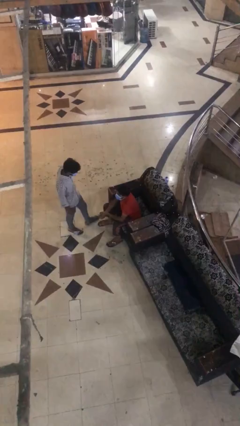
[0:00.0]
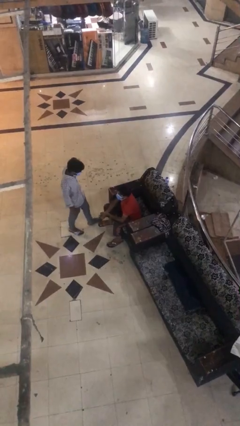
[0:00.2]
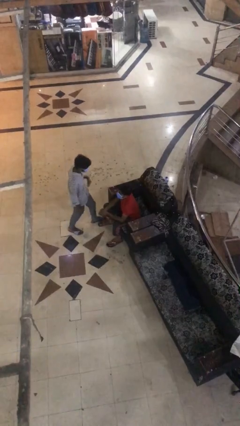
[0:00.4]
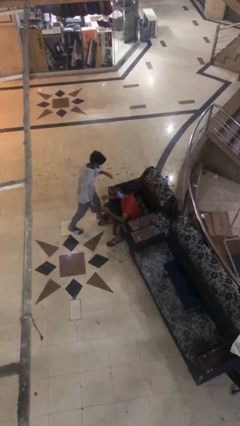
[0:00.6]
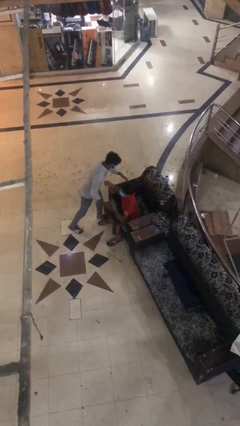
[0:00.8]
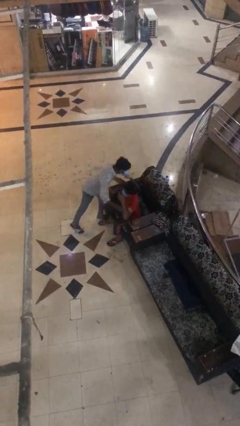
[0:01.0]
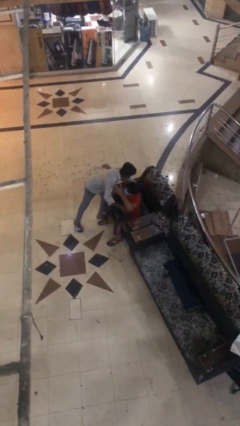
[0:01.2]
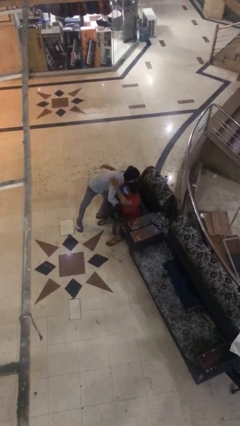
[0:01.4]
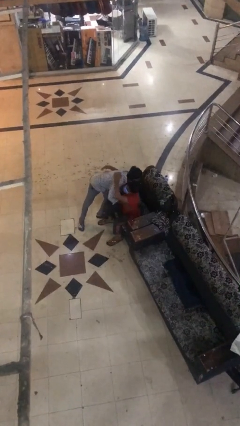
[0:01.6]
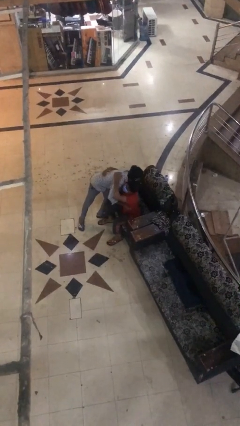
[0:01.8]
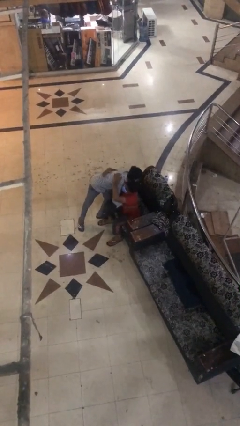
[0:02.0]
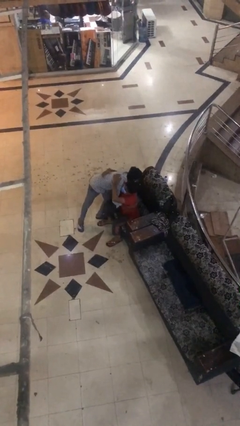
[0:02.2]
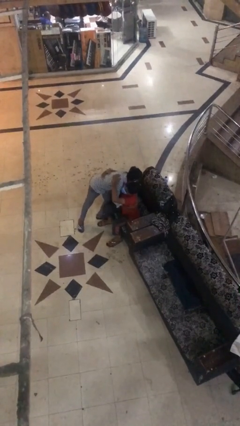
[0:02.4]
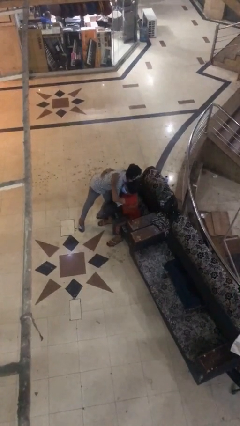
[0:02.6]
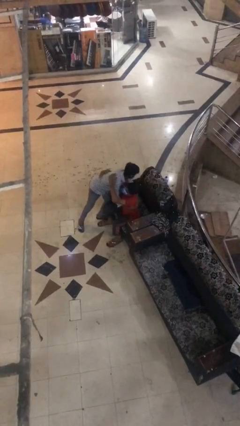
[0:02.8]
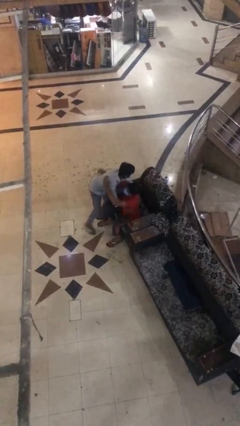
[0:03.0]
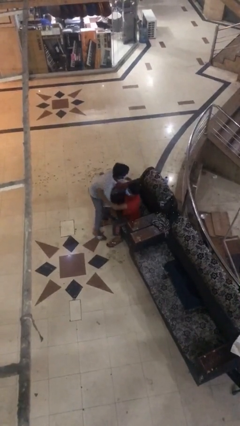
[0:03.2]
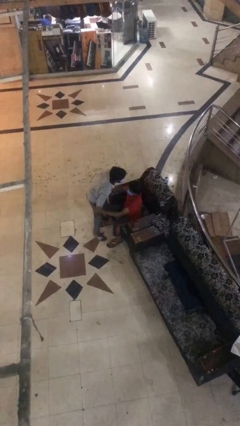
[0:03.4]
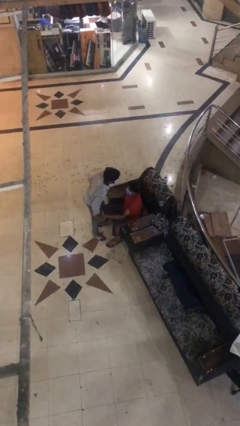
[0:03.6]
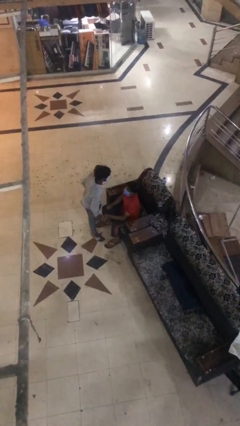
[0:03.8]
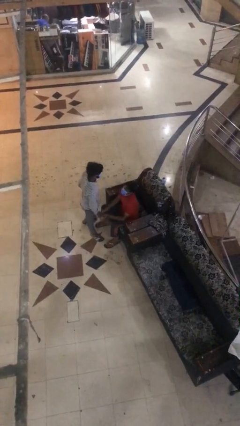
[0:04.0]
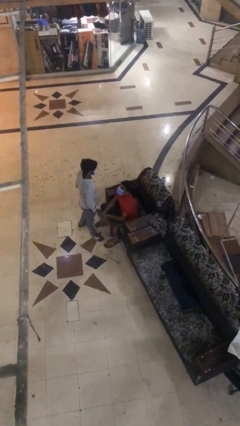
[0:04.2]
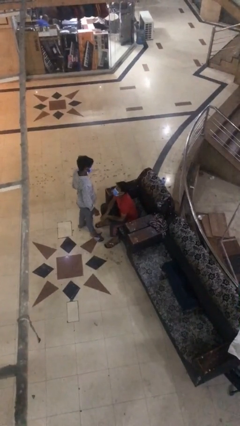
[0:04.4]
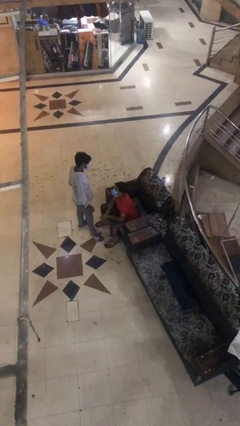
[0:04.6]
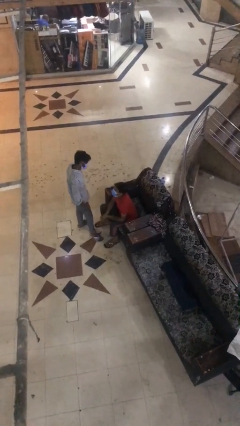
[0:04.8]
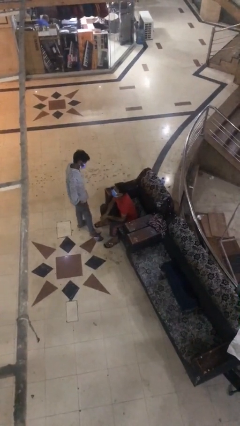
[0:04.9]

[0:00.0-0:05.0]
person embraces person

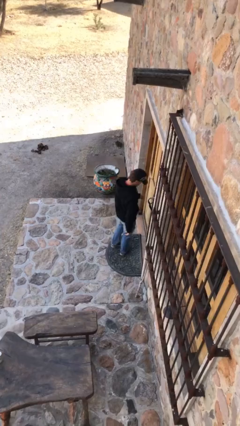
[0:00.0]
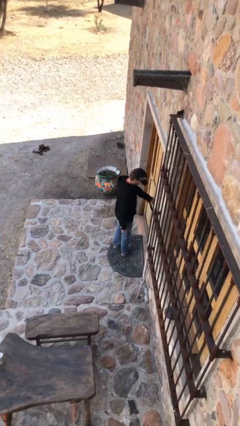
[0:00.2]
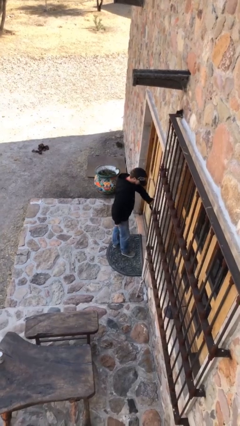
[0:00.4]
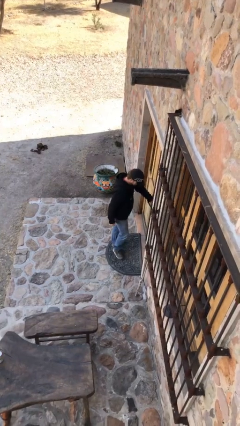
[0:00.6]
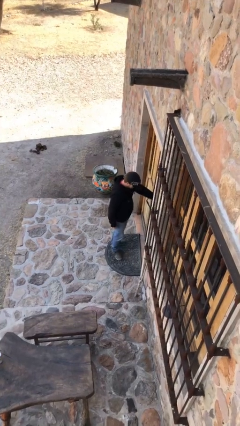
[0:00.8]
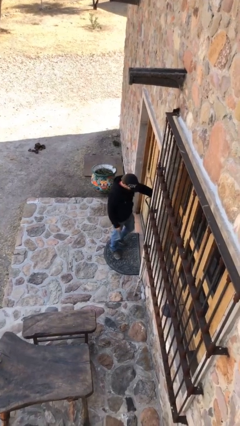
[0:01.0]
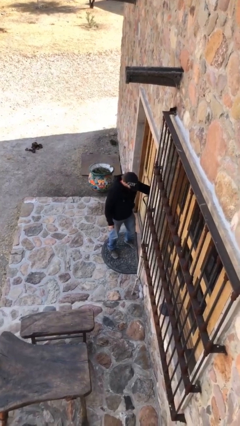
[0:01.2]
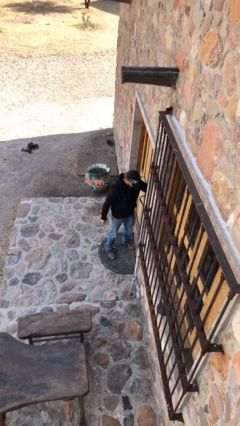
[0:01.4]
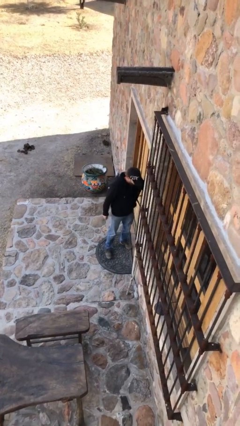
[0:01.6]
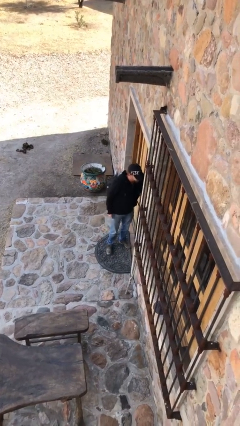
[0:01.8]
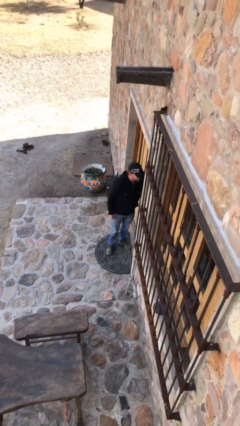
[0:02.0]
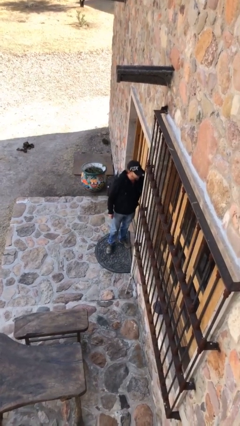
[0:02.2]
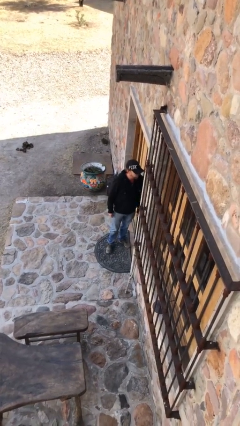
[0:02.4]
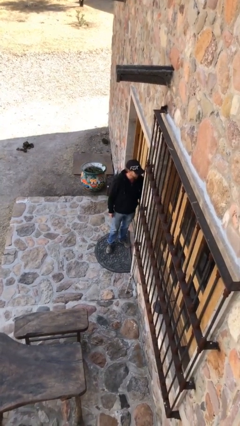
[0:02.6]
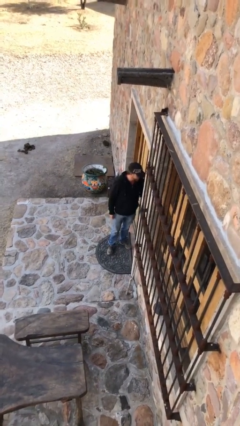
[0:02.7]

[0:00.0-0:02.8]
person opens facility door

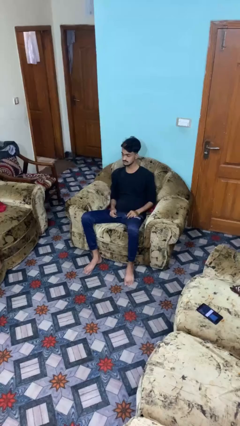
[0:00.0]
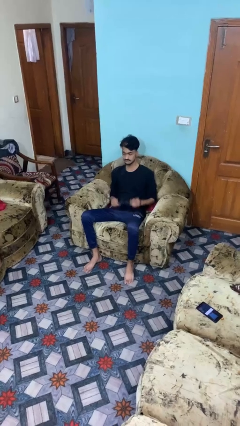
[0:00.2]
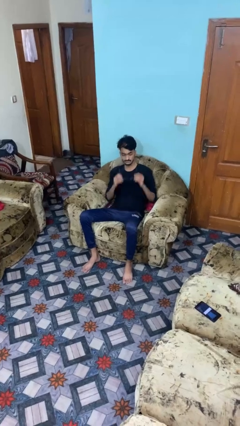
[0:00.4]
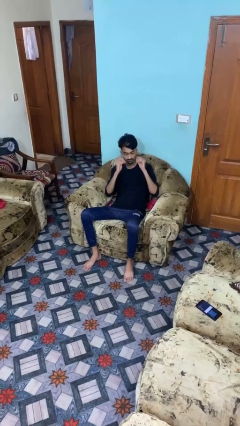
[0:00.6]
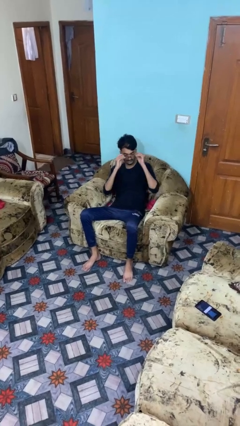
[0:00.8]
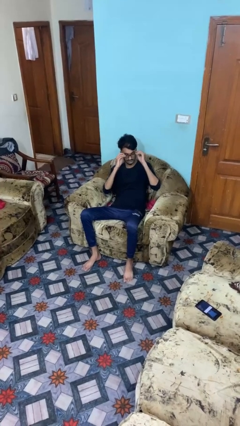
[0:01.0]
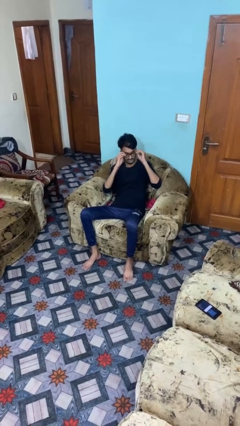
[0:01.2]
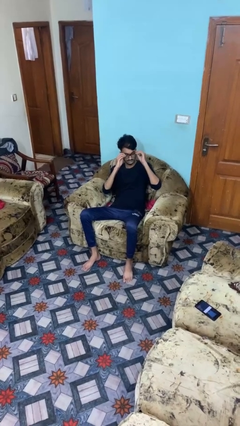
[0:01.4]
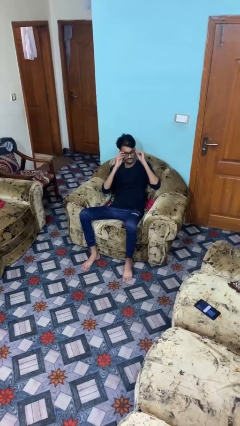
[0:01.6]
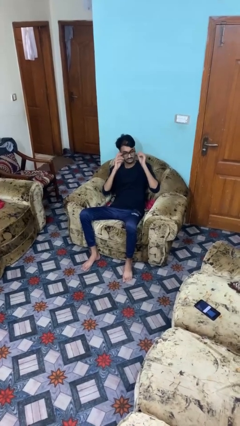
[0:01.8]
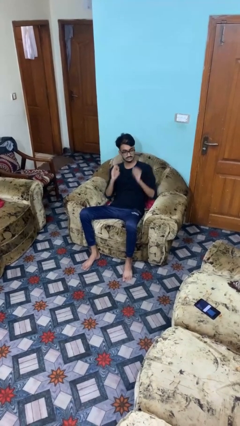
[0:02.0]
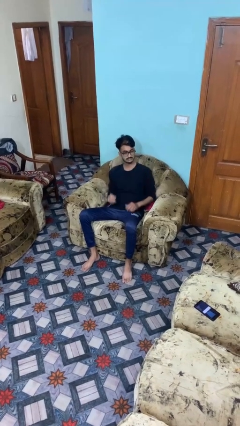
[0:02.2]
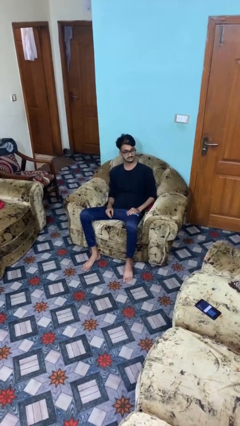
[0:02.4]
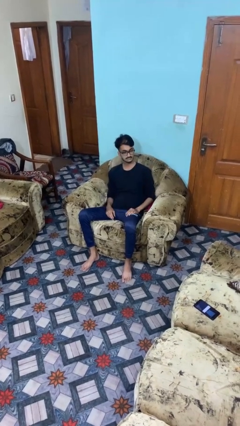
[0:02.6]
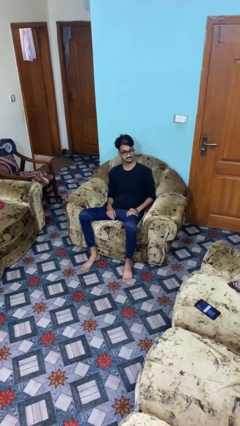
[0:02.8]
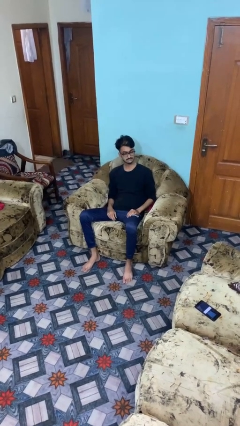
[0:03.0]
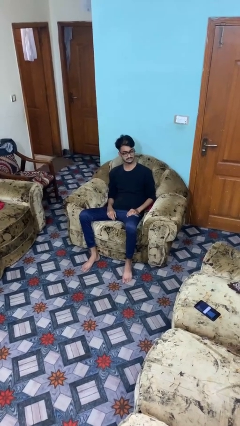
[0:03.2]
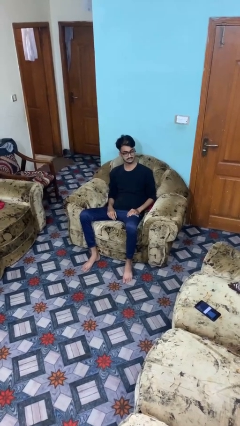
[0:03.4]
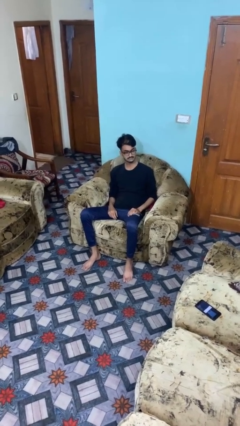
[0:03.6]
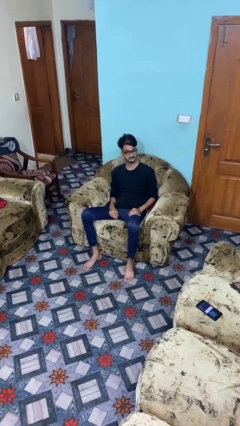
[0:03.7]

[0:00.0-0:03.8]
person puts on glasses

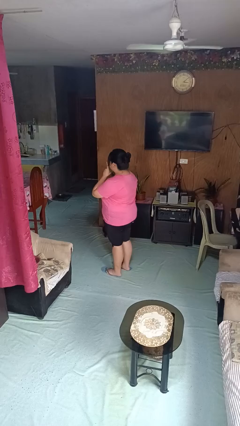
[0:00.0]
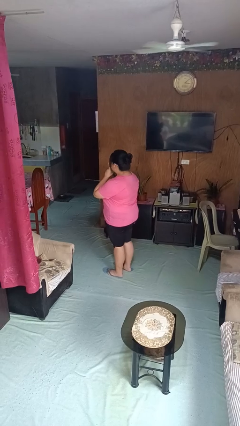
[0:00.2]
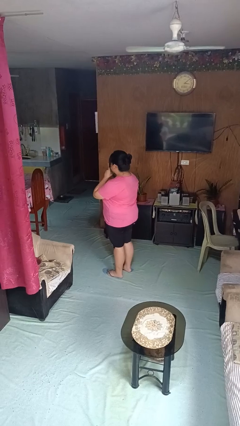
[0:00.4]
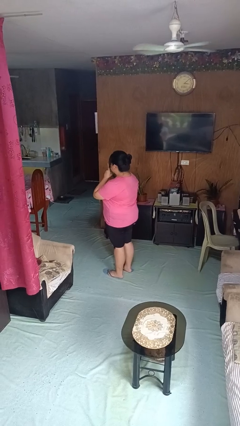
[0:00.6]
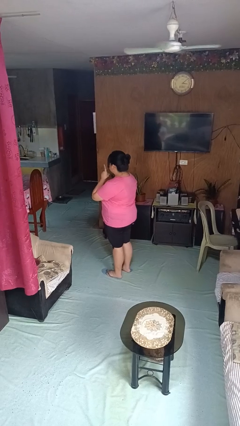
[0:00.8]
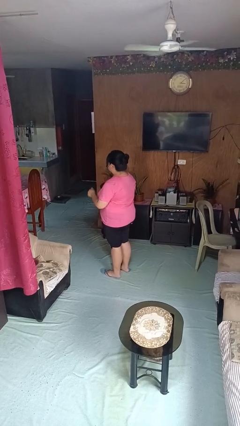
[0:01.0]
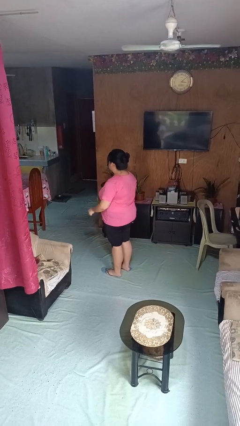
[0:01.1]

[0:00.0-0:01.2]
person gestures be quiet

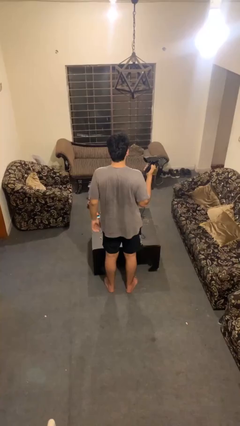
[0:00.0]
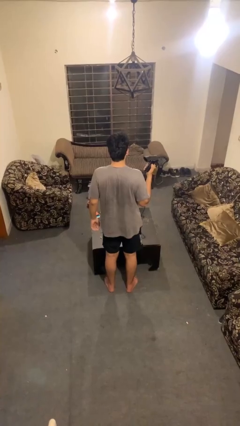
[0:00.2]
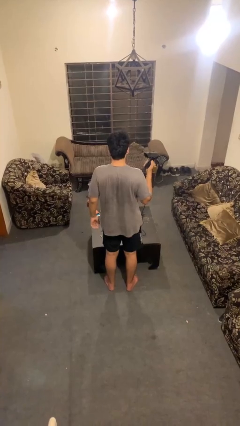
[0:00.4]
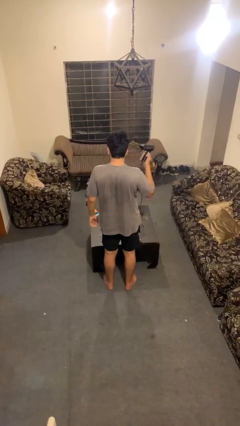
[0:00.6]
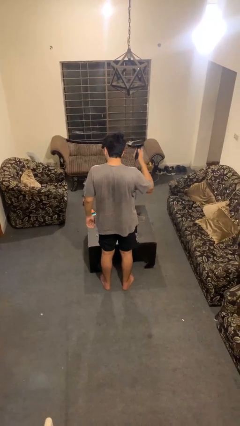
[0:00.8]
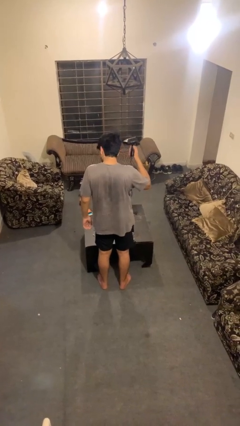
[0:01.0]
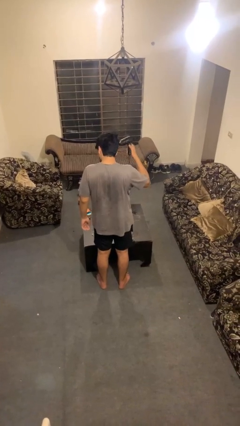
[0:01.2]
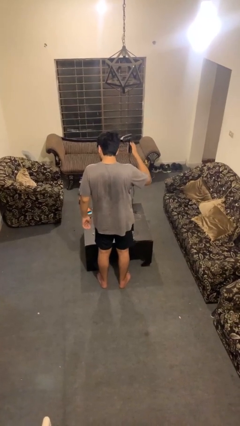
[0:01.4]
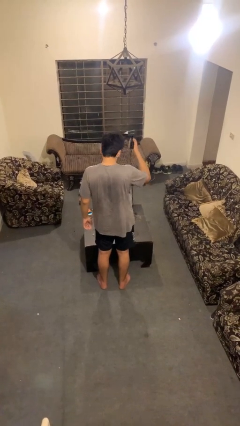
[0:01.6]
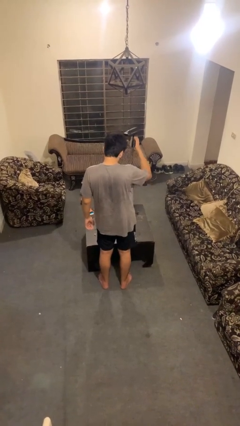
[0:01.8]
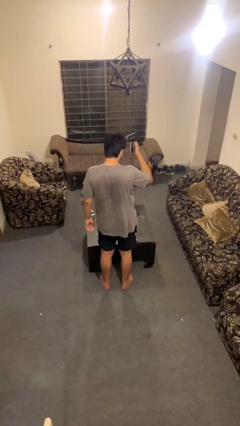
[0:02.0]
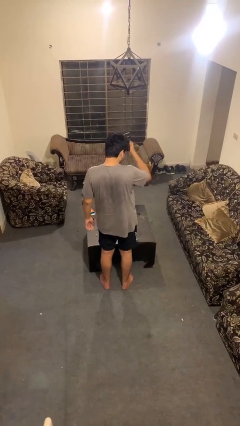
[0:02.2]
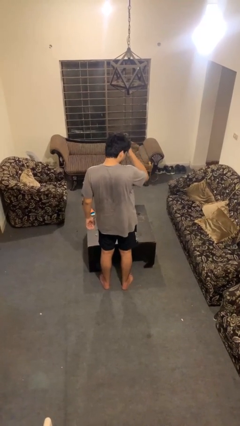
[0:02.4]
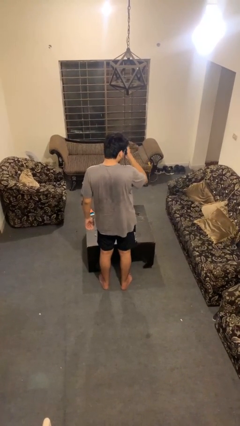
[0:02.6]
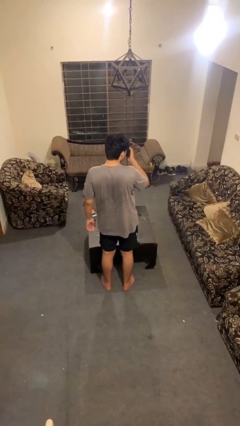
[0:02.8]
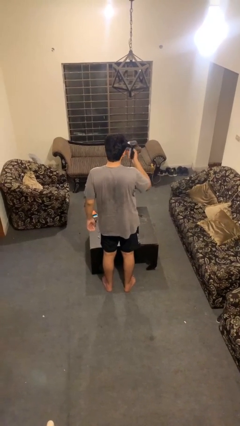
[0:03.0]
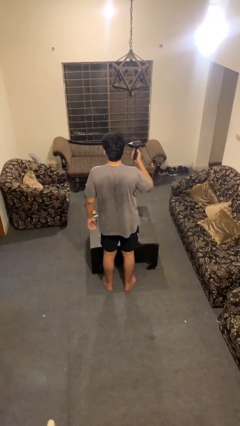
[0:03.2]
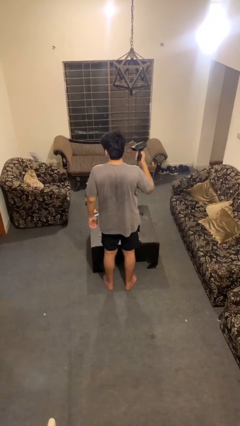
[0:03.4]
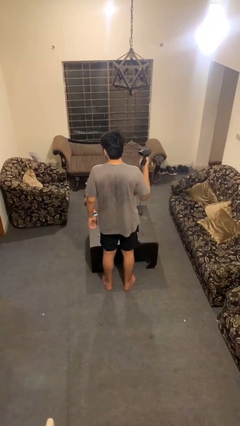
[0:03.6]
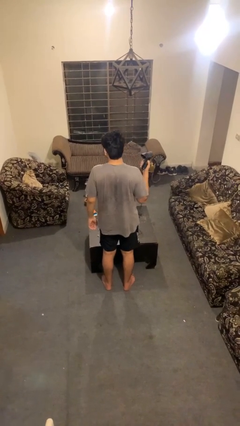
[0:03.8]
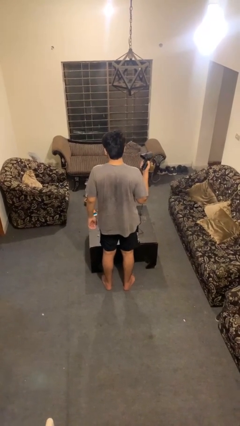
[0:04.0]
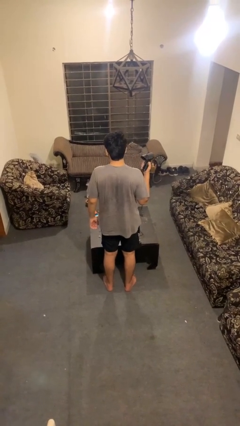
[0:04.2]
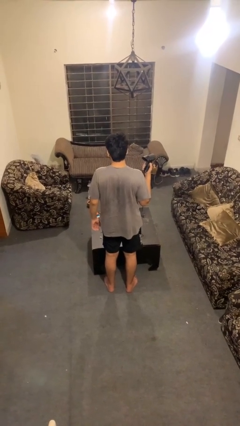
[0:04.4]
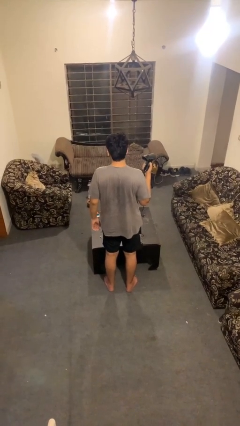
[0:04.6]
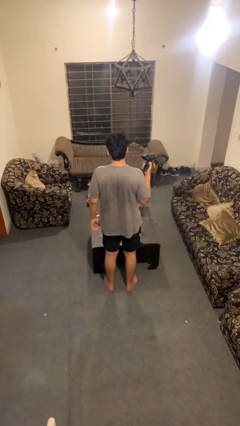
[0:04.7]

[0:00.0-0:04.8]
person dries hair with hairdryer
